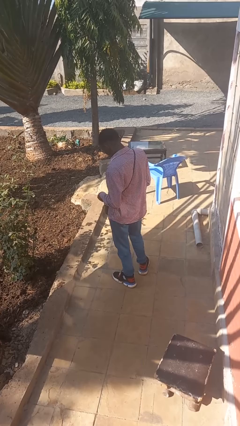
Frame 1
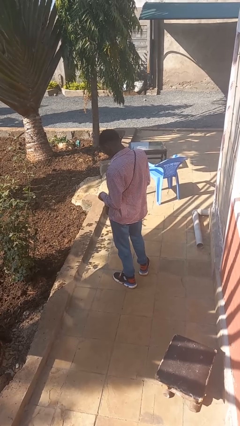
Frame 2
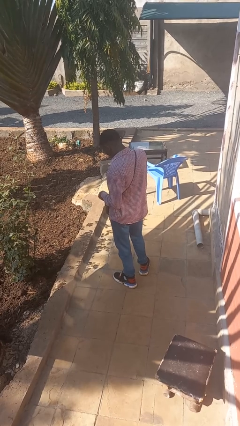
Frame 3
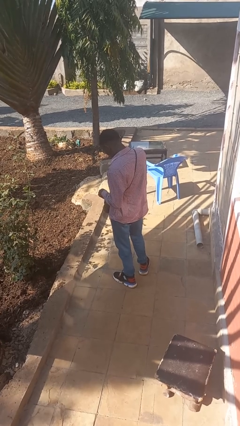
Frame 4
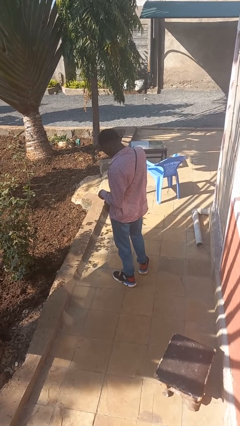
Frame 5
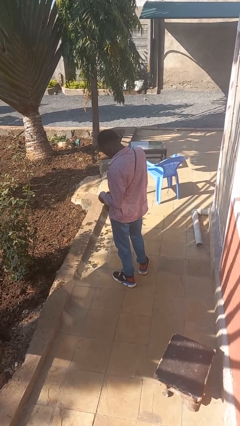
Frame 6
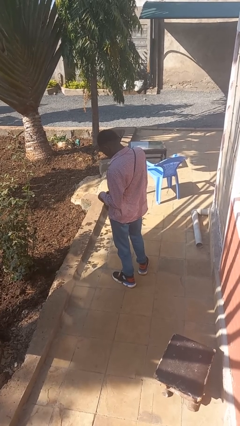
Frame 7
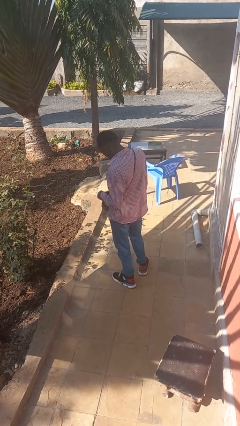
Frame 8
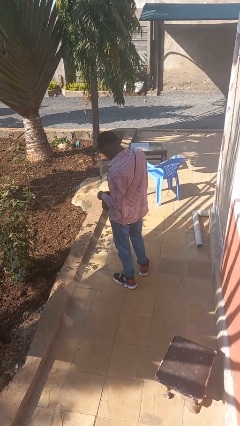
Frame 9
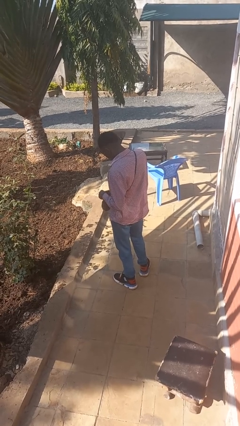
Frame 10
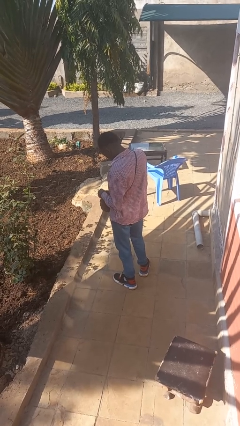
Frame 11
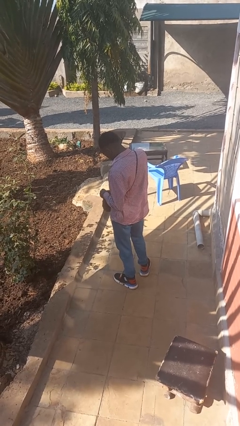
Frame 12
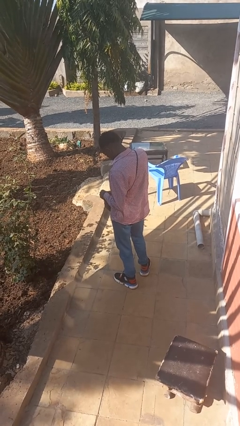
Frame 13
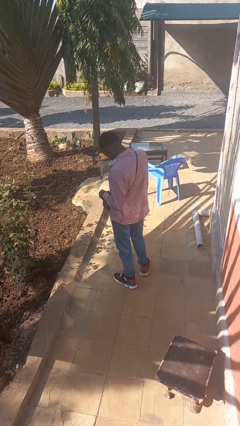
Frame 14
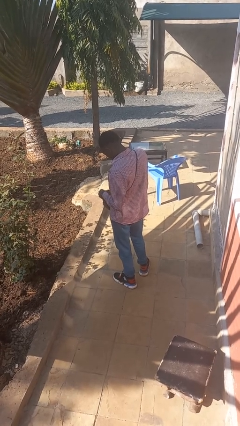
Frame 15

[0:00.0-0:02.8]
person searches in purse

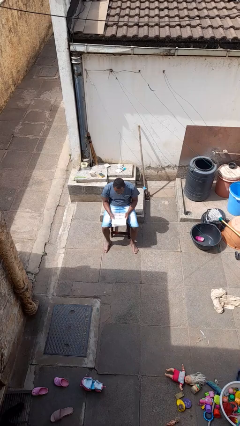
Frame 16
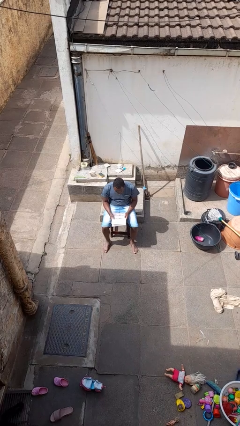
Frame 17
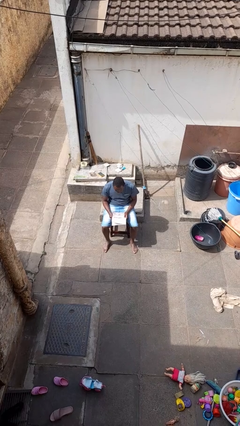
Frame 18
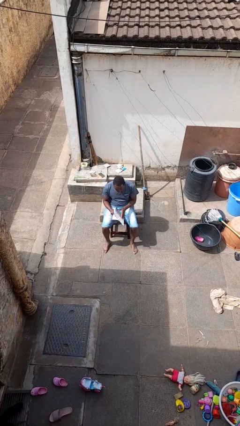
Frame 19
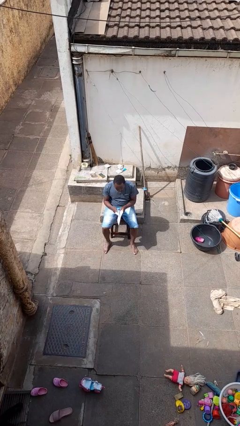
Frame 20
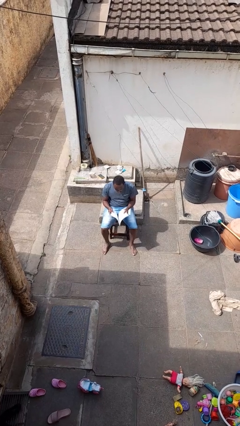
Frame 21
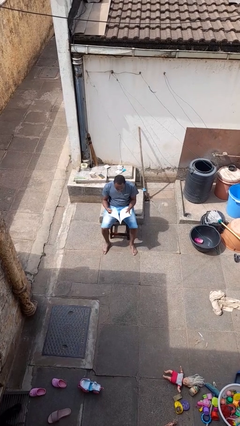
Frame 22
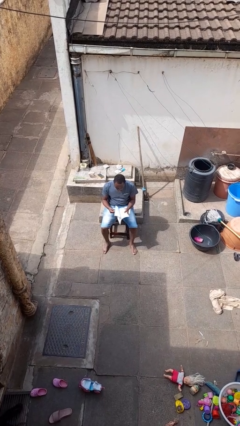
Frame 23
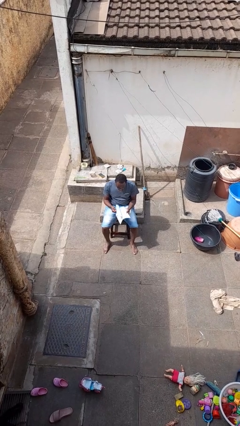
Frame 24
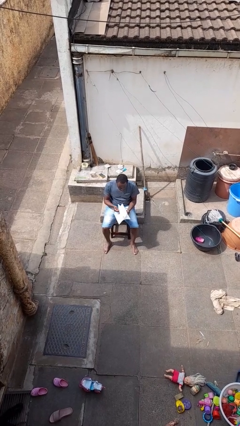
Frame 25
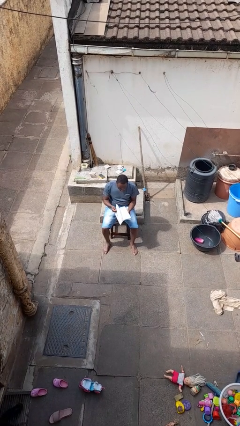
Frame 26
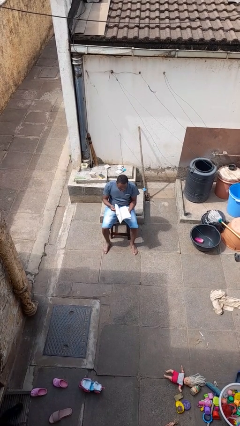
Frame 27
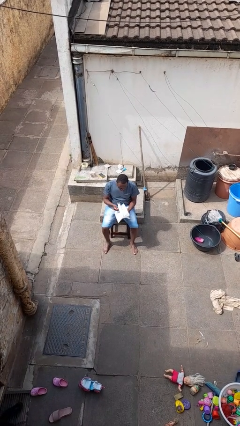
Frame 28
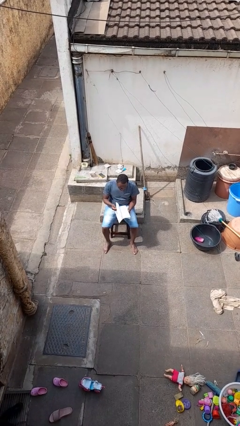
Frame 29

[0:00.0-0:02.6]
person reads magazine

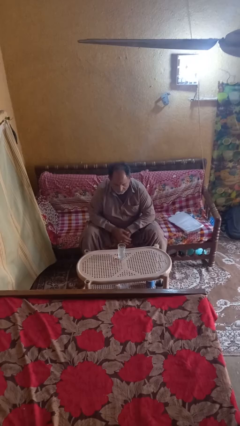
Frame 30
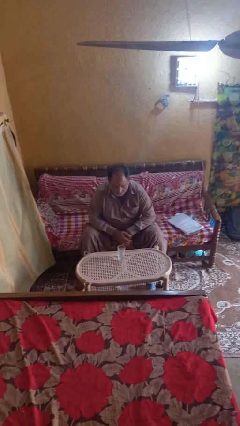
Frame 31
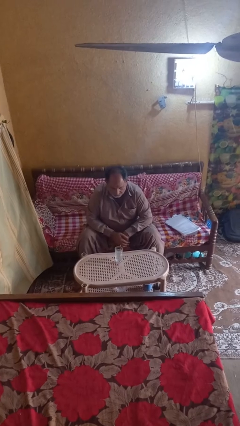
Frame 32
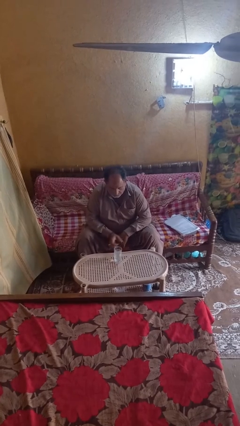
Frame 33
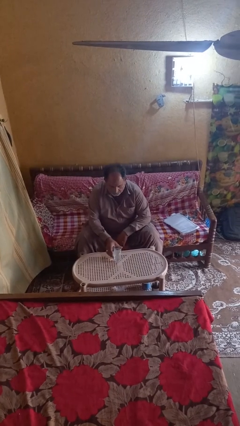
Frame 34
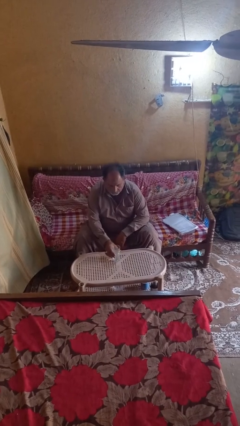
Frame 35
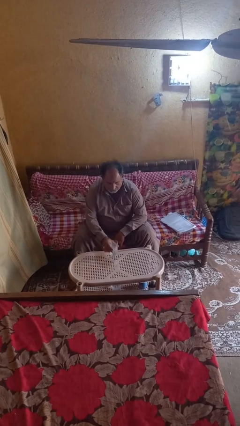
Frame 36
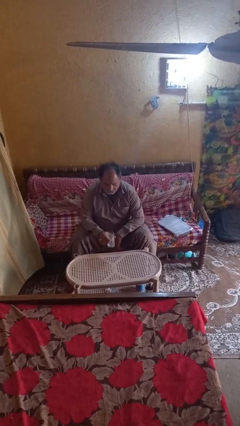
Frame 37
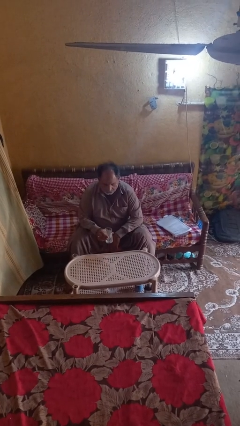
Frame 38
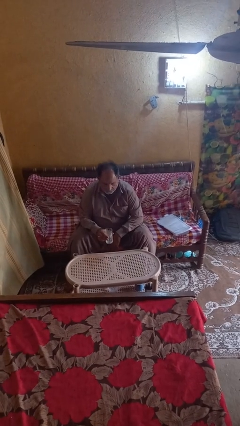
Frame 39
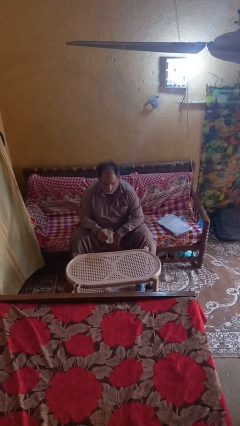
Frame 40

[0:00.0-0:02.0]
person picks up object from table

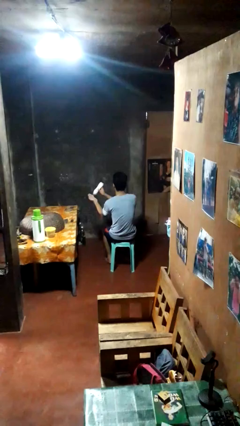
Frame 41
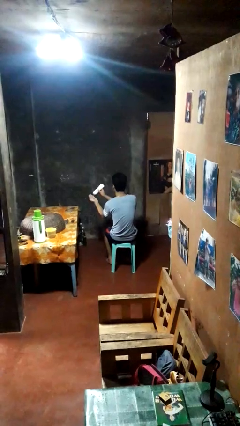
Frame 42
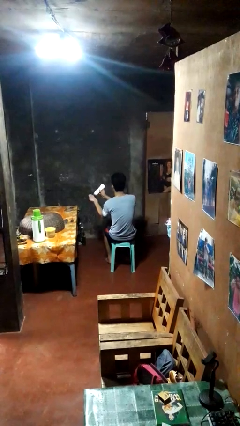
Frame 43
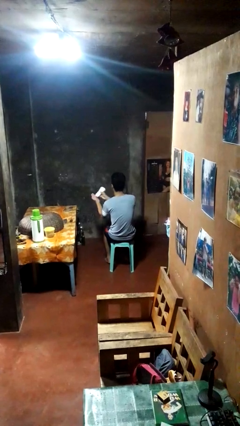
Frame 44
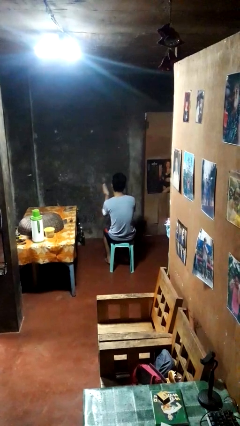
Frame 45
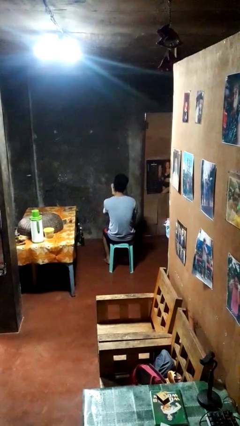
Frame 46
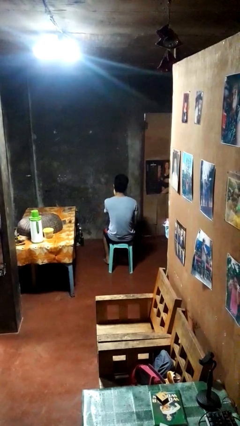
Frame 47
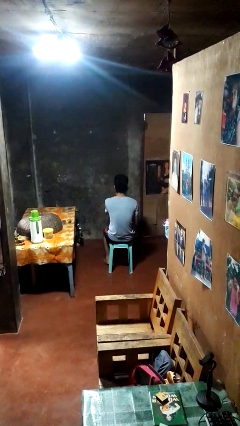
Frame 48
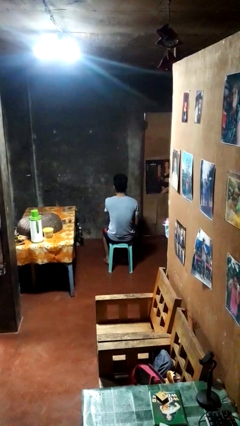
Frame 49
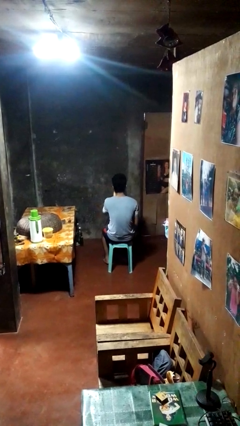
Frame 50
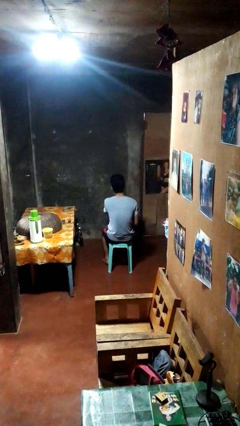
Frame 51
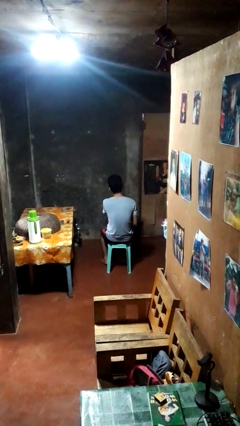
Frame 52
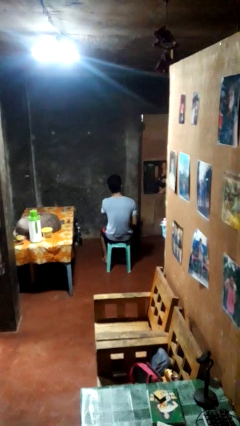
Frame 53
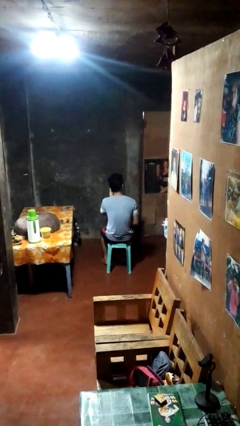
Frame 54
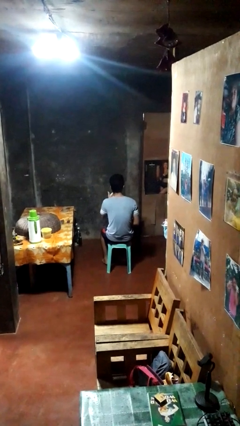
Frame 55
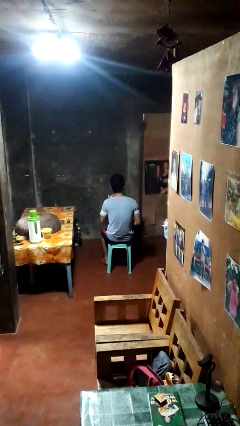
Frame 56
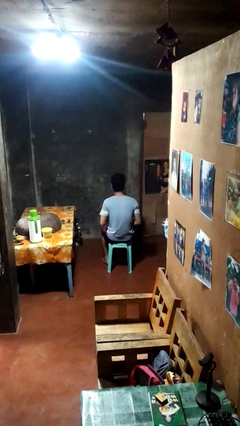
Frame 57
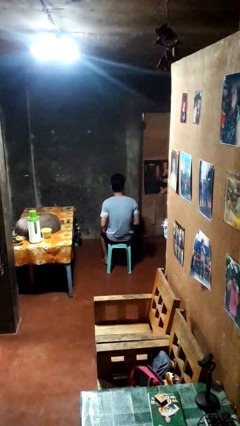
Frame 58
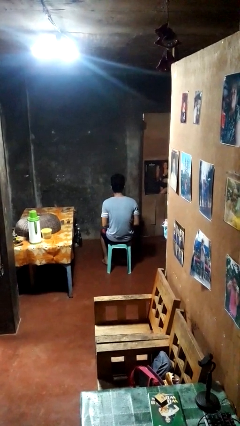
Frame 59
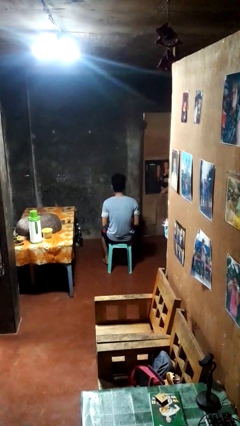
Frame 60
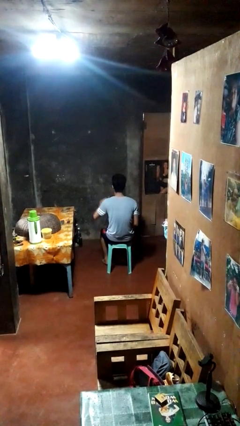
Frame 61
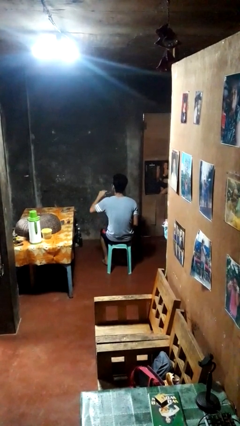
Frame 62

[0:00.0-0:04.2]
person applies shaving cream

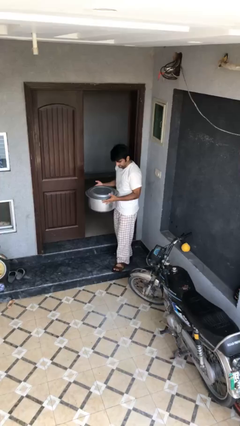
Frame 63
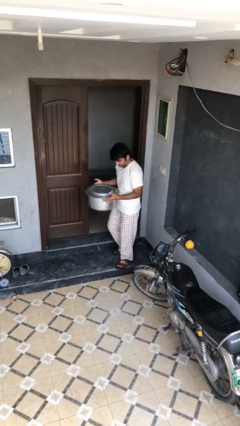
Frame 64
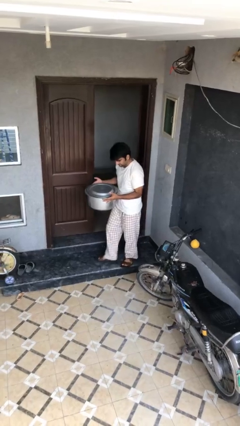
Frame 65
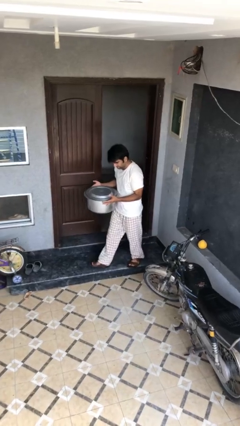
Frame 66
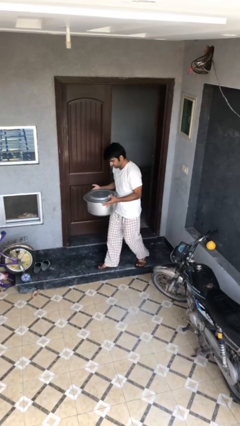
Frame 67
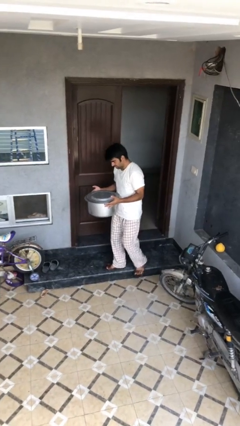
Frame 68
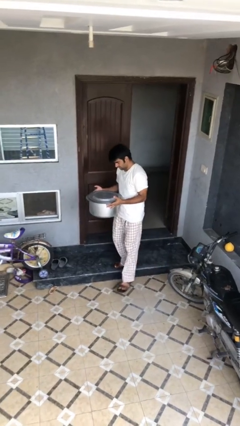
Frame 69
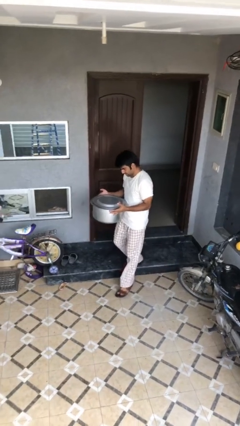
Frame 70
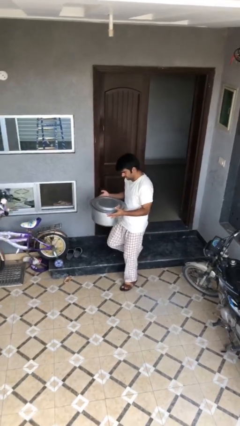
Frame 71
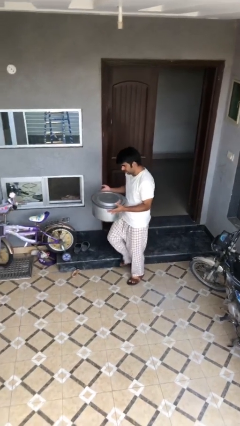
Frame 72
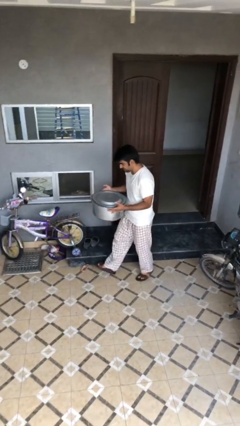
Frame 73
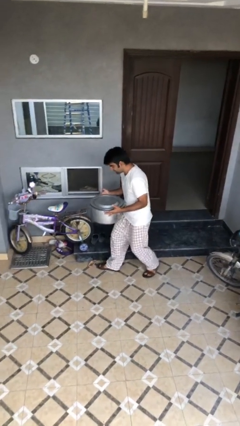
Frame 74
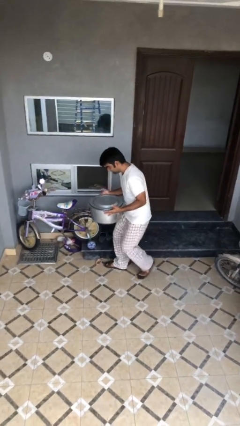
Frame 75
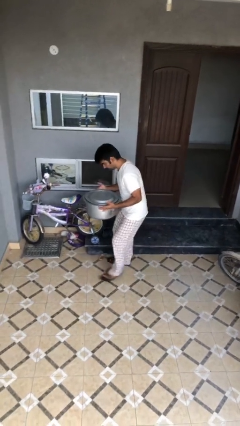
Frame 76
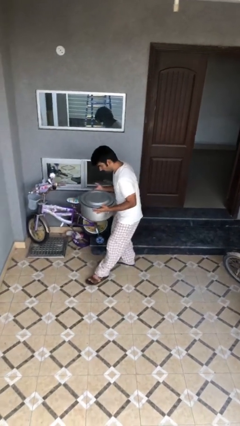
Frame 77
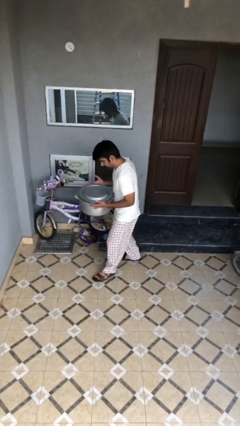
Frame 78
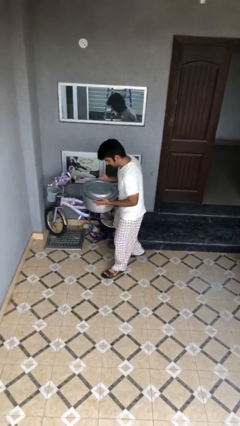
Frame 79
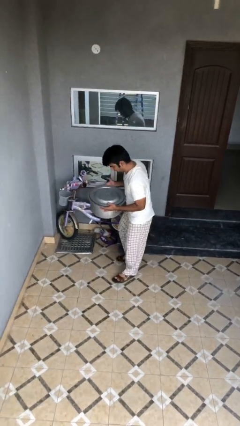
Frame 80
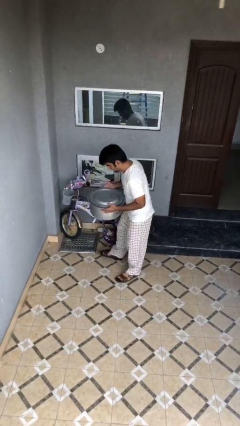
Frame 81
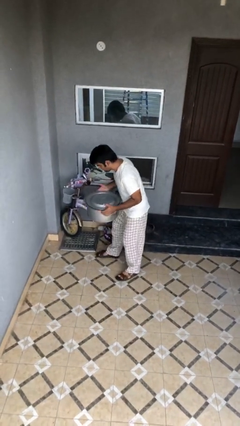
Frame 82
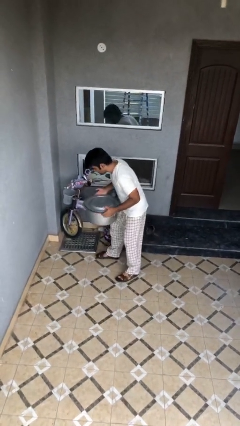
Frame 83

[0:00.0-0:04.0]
person carries heavy object

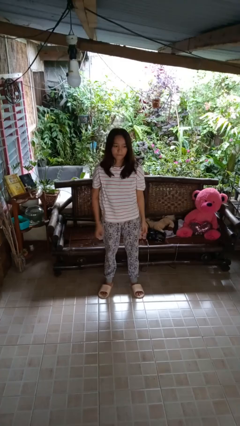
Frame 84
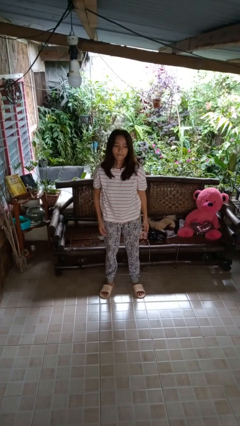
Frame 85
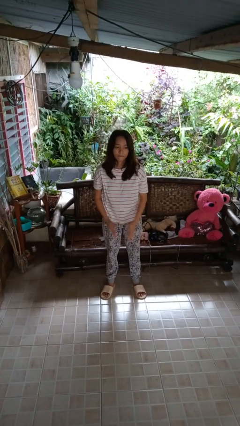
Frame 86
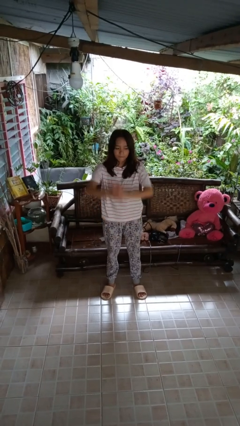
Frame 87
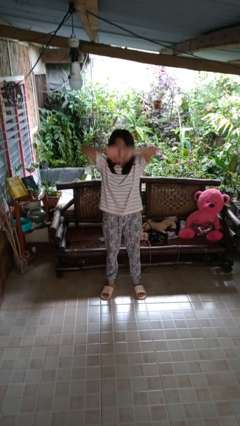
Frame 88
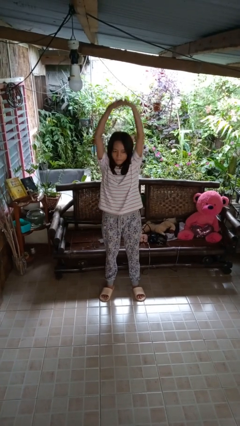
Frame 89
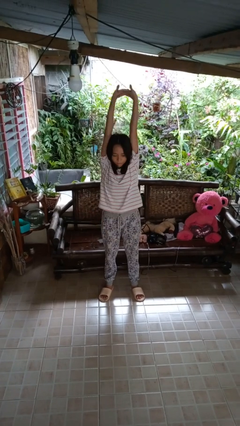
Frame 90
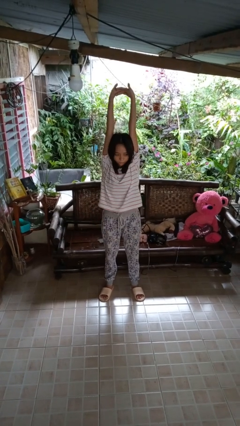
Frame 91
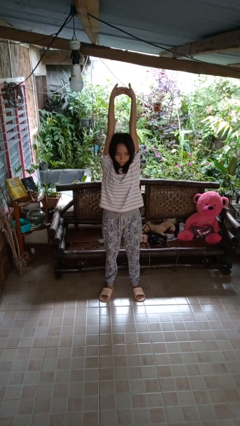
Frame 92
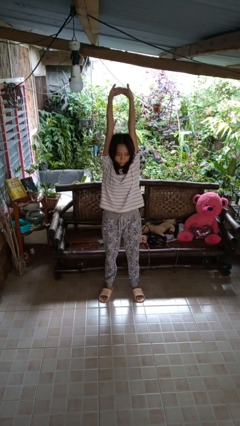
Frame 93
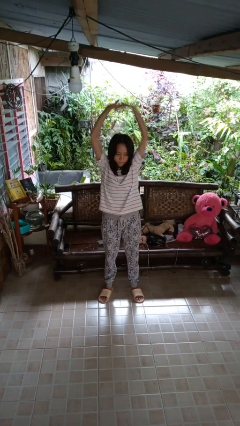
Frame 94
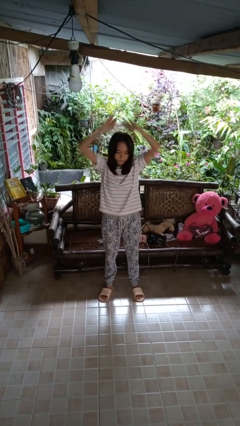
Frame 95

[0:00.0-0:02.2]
person stretches arms over head
